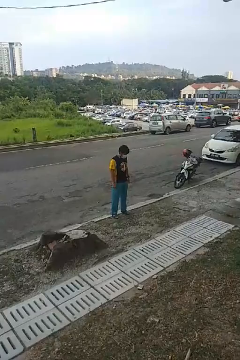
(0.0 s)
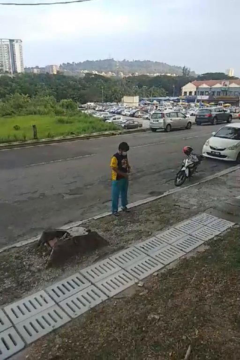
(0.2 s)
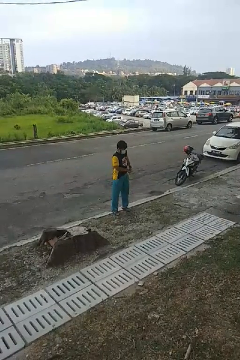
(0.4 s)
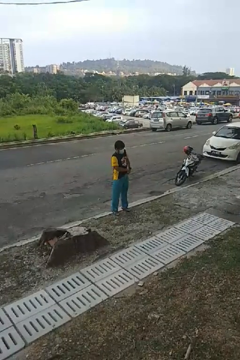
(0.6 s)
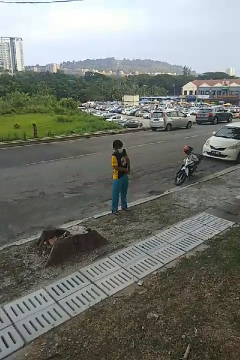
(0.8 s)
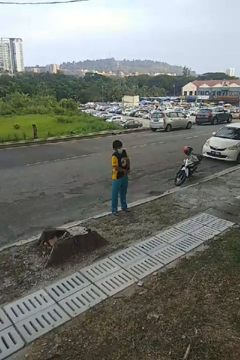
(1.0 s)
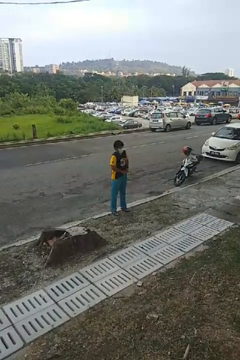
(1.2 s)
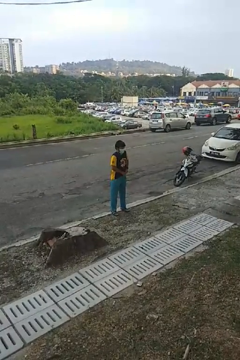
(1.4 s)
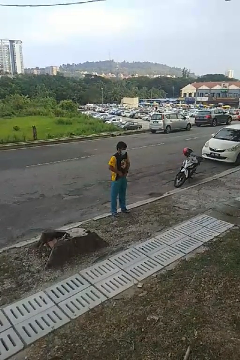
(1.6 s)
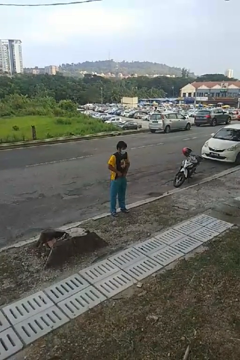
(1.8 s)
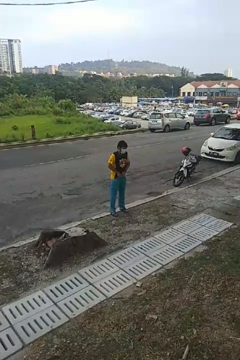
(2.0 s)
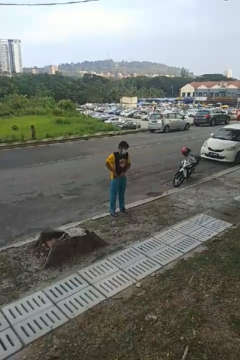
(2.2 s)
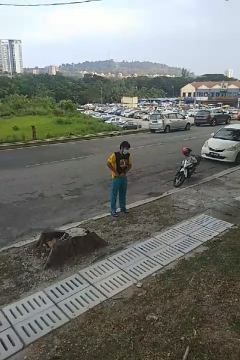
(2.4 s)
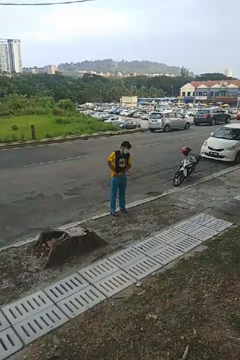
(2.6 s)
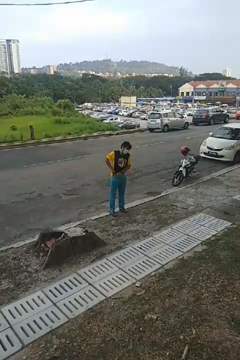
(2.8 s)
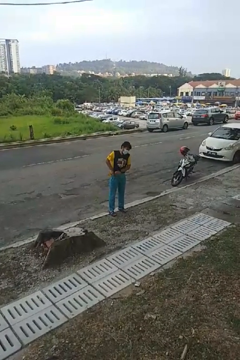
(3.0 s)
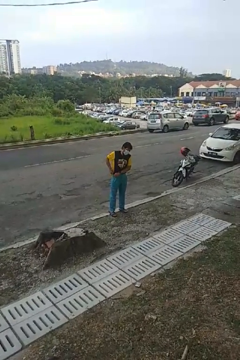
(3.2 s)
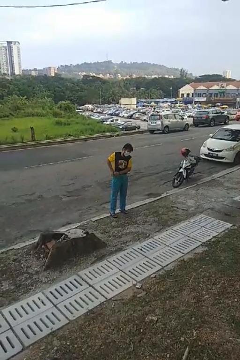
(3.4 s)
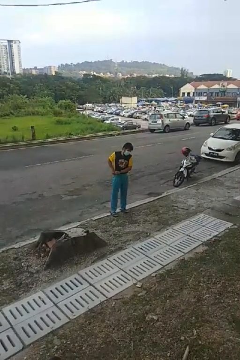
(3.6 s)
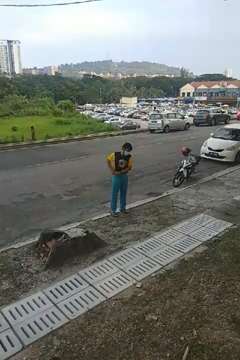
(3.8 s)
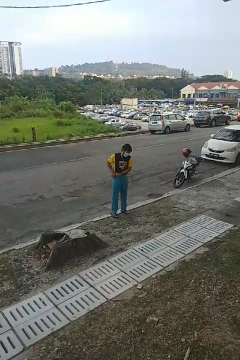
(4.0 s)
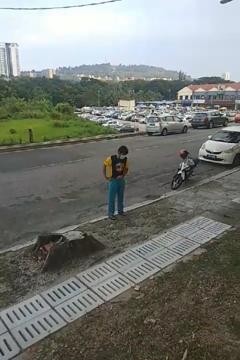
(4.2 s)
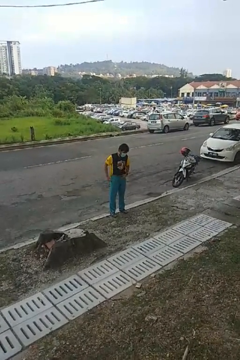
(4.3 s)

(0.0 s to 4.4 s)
person tucks in shirt

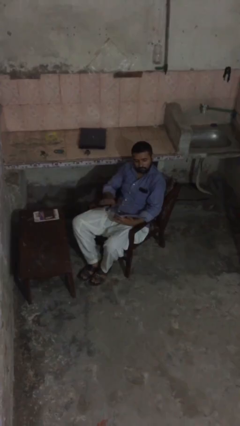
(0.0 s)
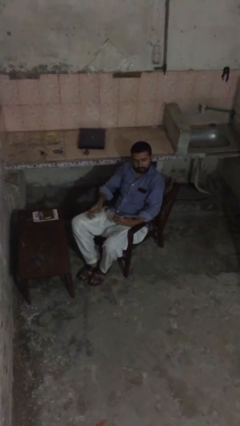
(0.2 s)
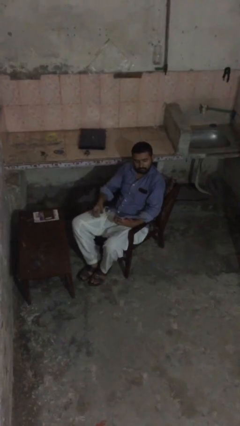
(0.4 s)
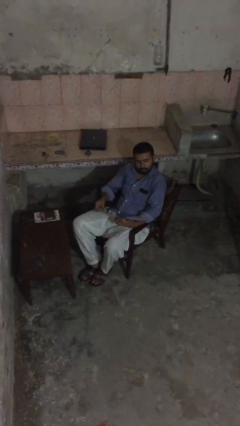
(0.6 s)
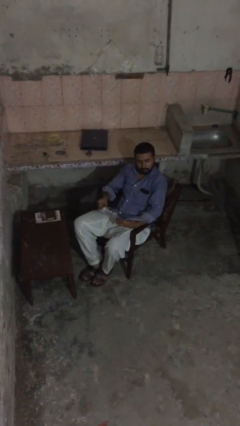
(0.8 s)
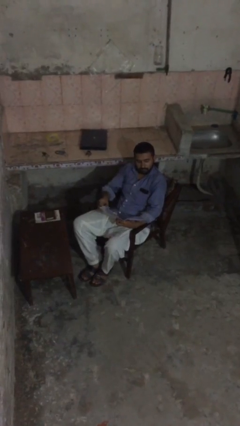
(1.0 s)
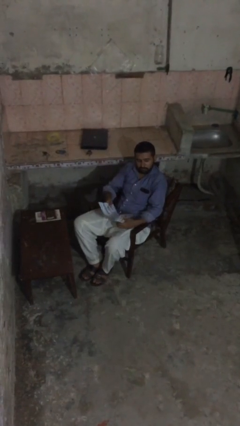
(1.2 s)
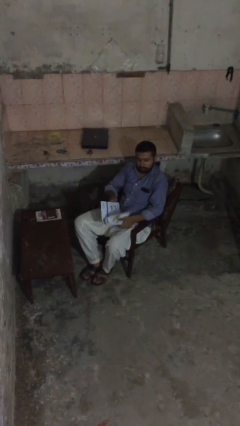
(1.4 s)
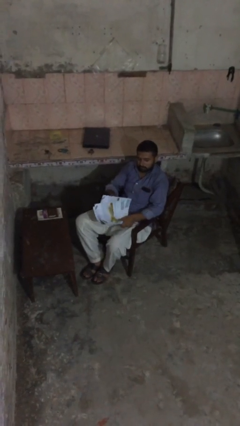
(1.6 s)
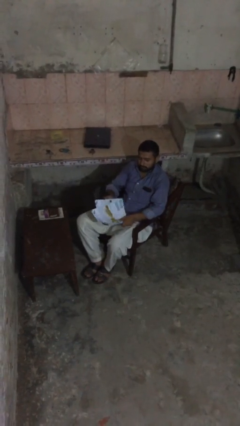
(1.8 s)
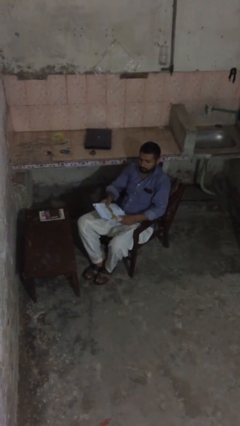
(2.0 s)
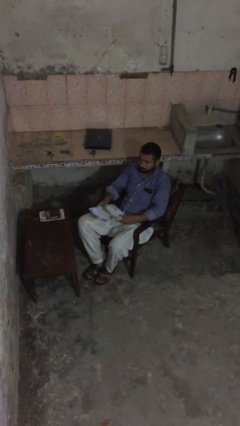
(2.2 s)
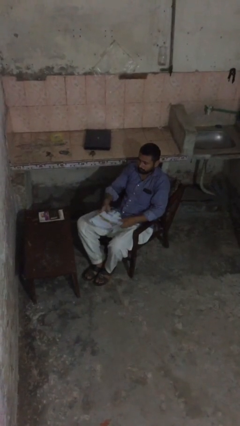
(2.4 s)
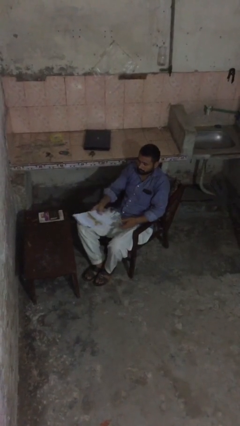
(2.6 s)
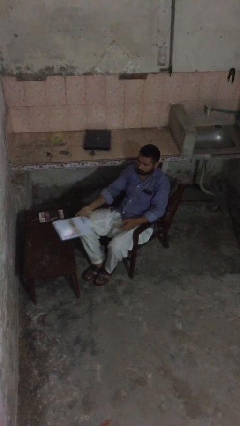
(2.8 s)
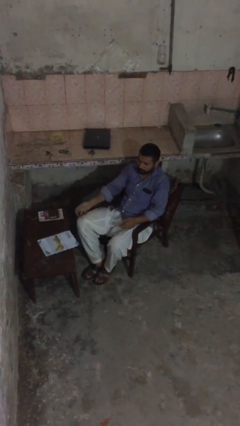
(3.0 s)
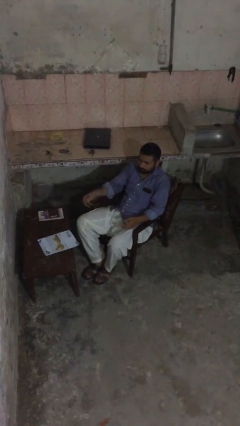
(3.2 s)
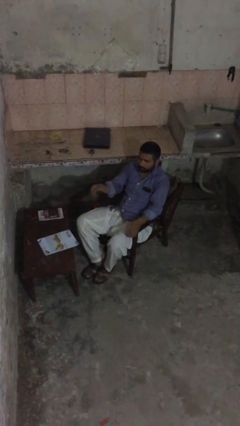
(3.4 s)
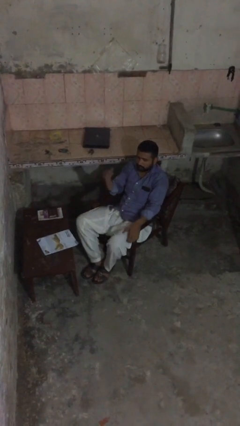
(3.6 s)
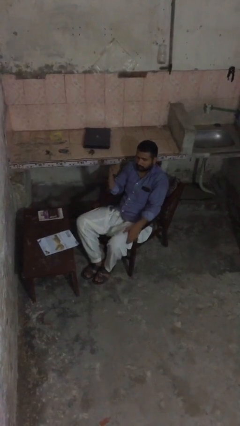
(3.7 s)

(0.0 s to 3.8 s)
person puts down object on table

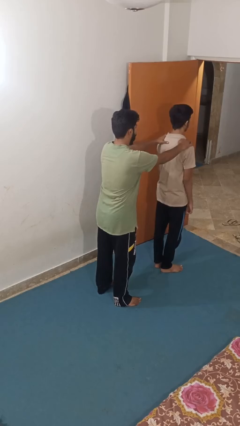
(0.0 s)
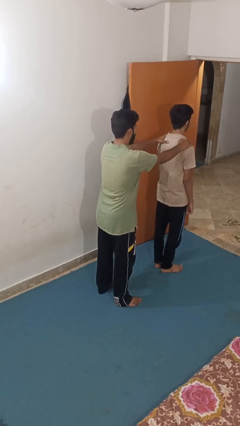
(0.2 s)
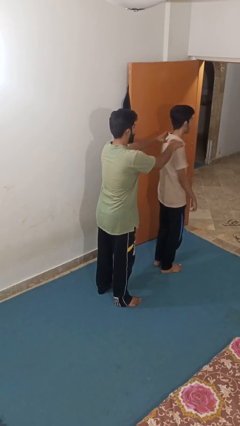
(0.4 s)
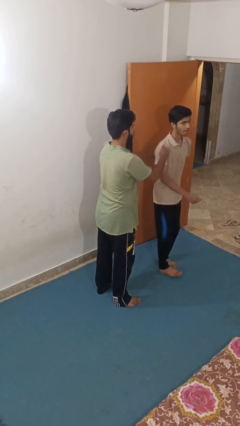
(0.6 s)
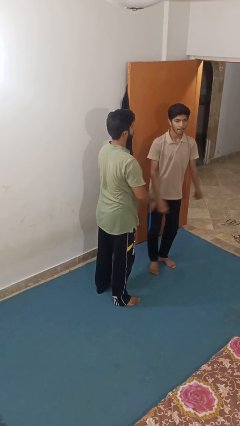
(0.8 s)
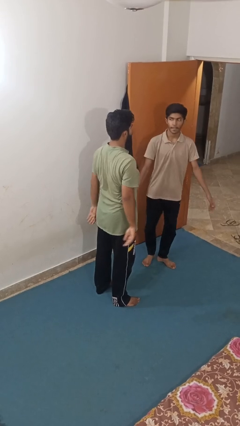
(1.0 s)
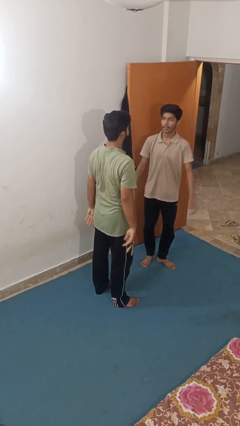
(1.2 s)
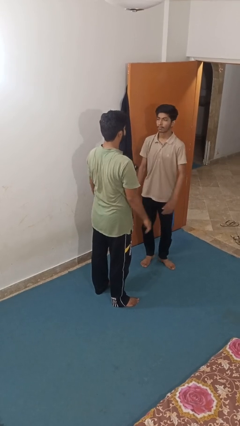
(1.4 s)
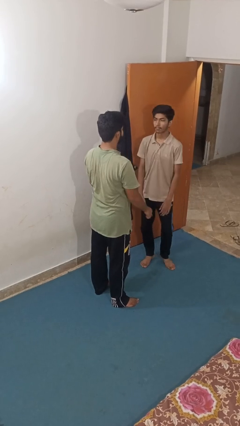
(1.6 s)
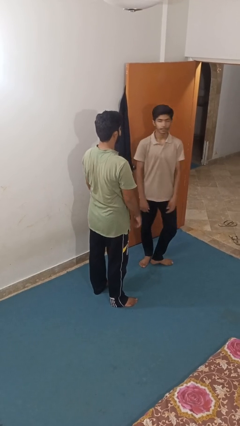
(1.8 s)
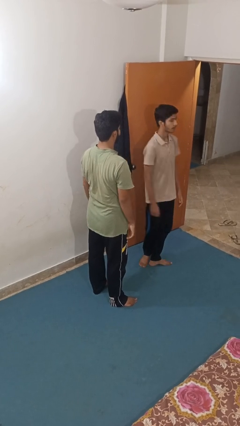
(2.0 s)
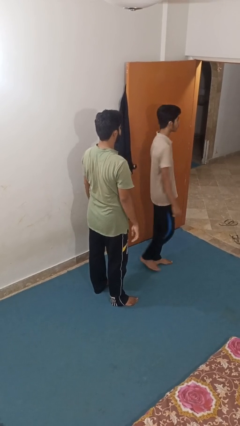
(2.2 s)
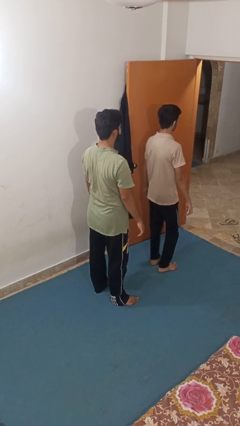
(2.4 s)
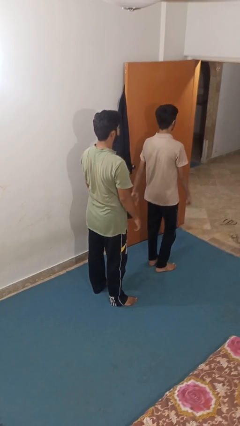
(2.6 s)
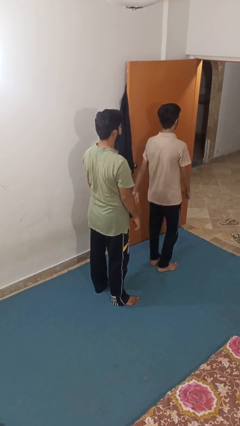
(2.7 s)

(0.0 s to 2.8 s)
person spins person around

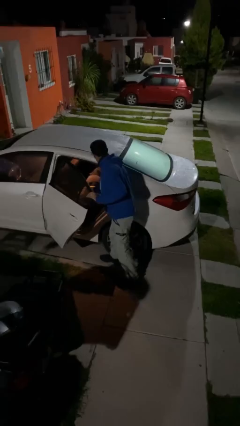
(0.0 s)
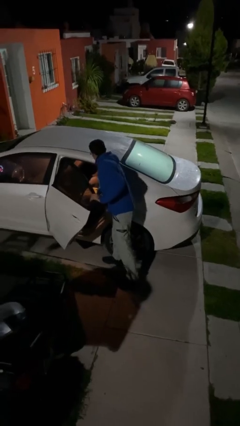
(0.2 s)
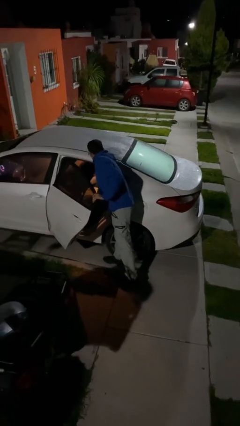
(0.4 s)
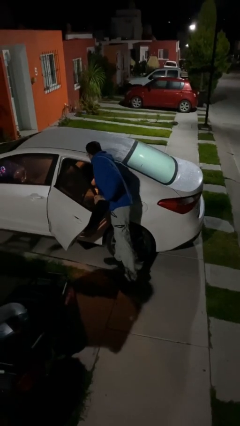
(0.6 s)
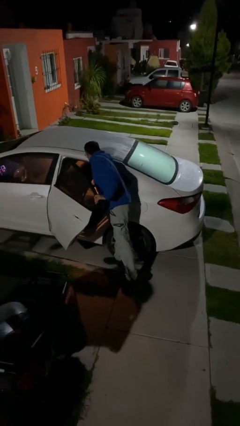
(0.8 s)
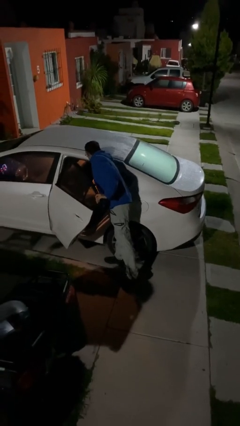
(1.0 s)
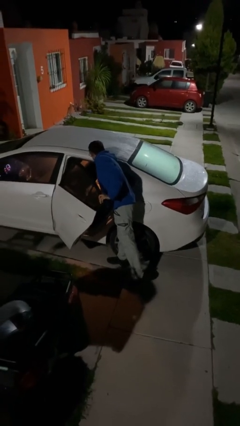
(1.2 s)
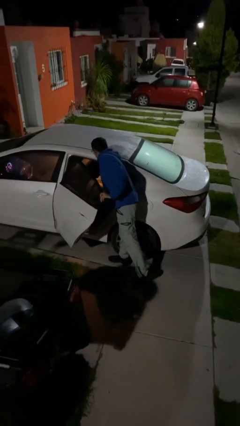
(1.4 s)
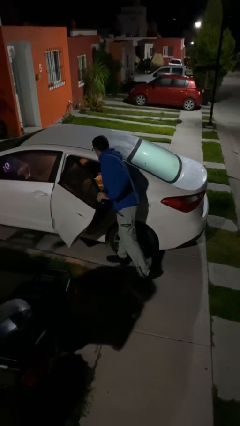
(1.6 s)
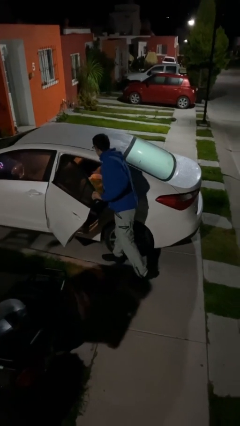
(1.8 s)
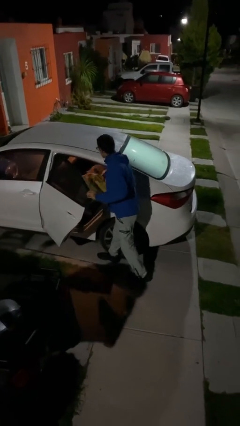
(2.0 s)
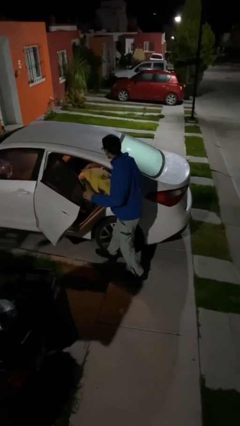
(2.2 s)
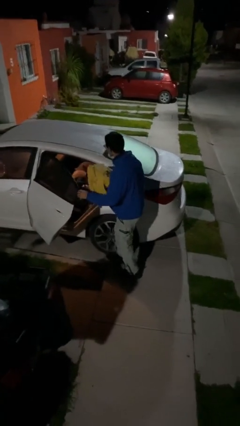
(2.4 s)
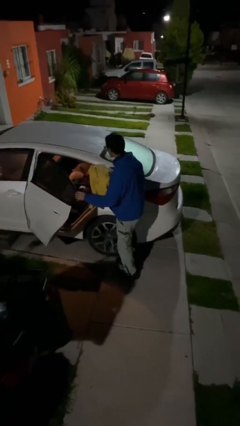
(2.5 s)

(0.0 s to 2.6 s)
person unloads car

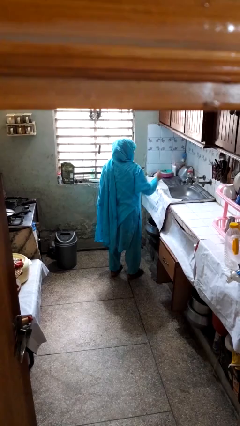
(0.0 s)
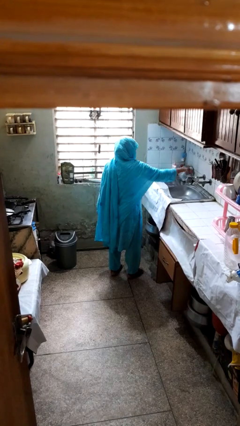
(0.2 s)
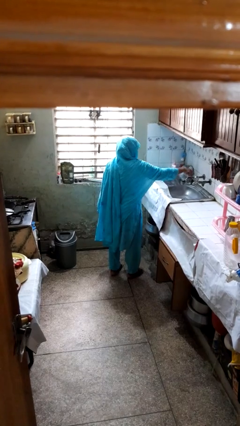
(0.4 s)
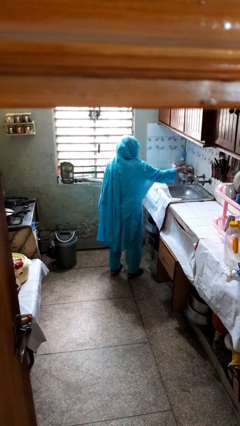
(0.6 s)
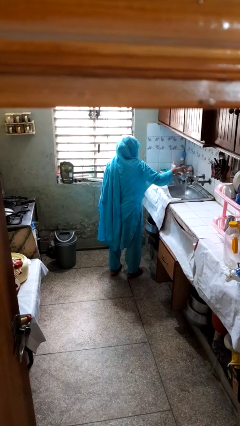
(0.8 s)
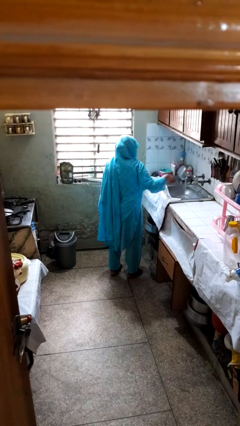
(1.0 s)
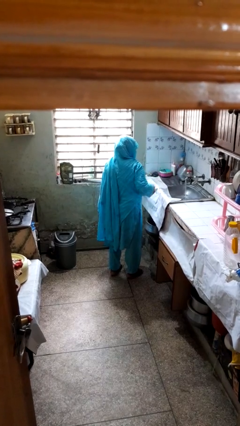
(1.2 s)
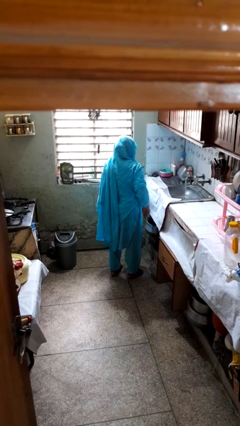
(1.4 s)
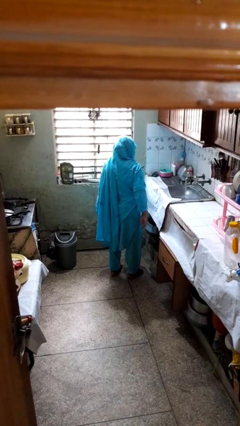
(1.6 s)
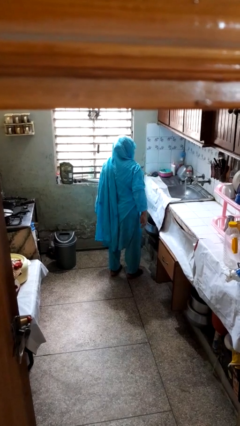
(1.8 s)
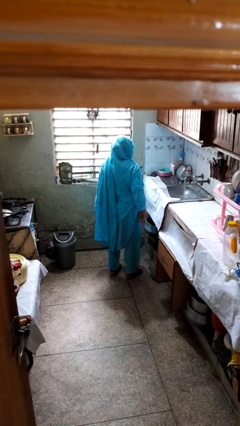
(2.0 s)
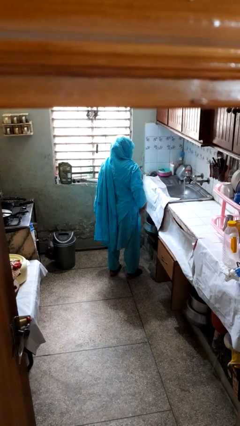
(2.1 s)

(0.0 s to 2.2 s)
person turns on faucet

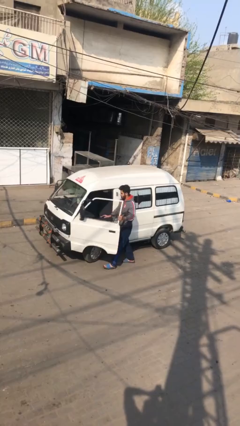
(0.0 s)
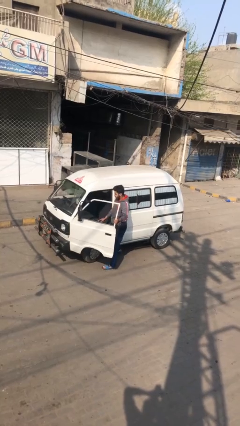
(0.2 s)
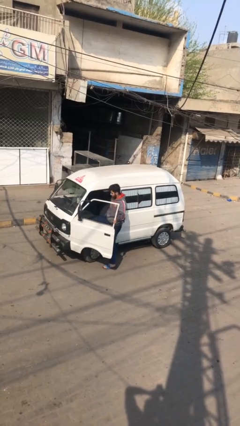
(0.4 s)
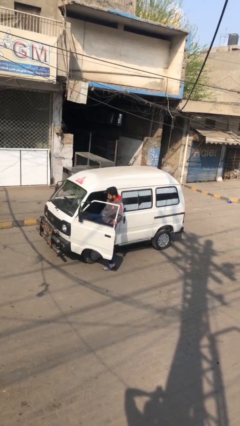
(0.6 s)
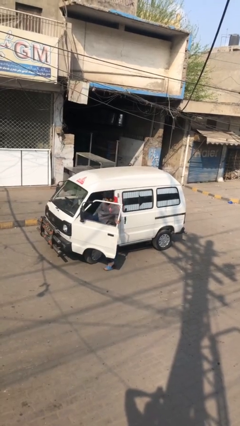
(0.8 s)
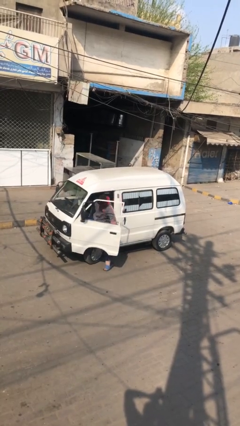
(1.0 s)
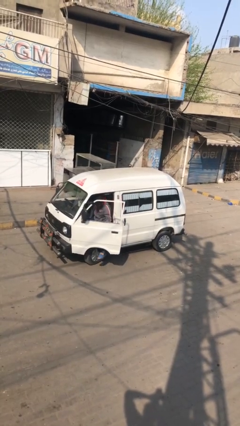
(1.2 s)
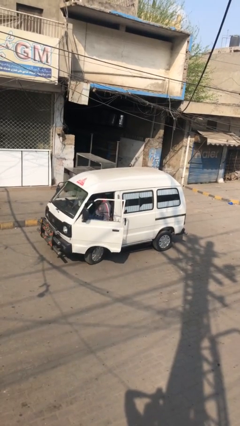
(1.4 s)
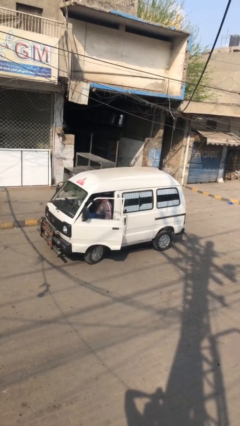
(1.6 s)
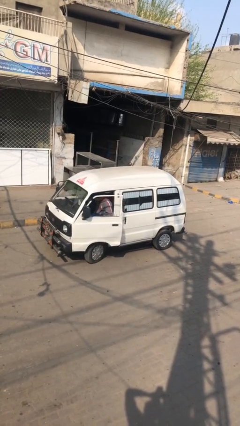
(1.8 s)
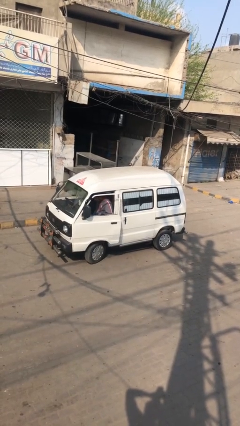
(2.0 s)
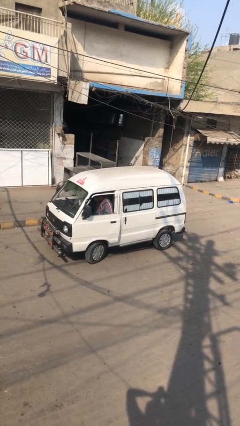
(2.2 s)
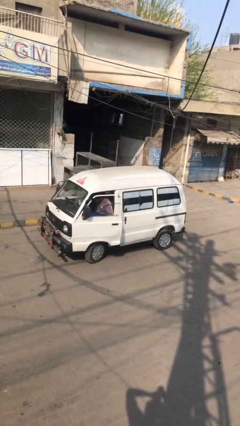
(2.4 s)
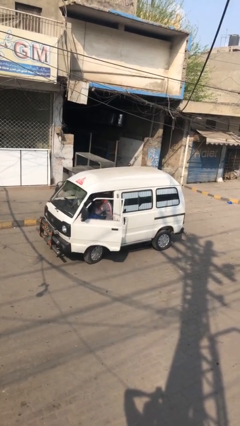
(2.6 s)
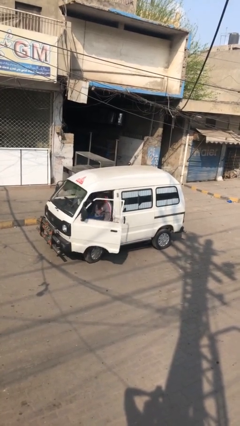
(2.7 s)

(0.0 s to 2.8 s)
car picks up person
